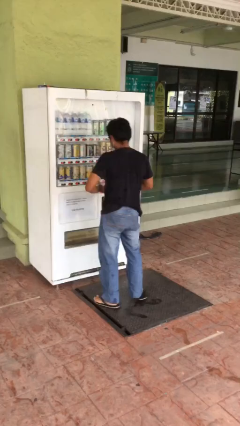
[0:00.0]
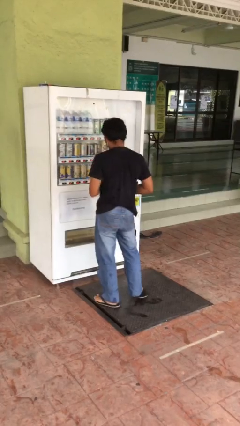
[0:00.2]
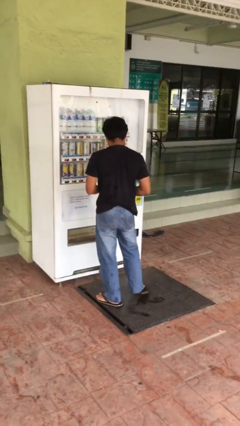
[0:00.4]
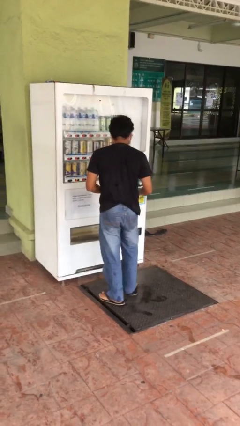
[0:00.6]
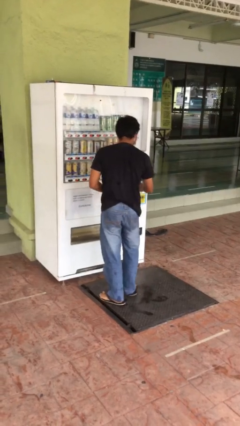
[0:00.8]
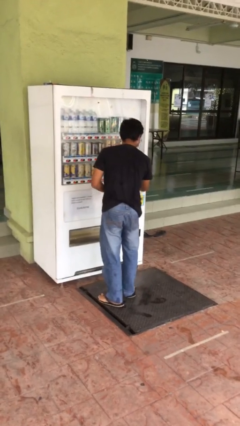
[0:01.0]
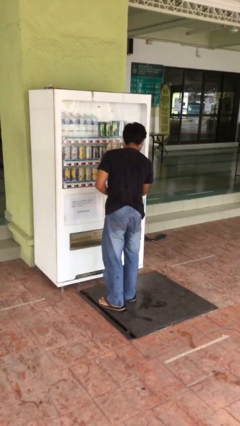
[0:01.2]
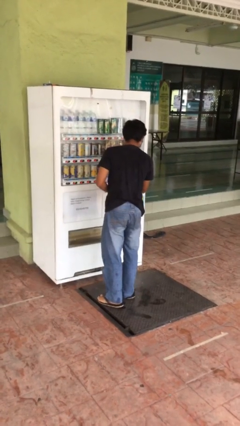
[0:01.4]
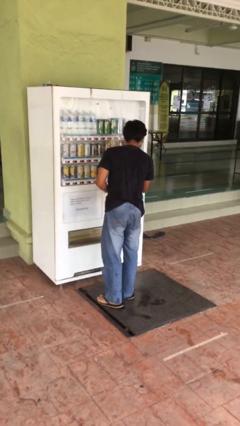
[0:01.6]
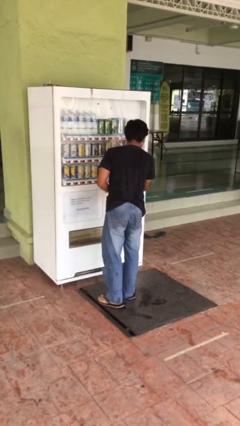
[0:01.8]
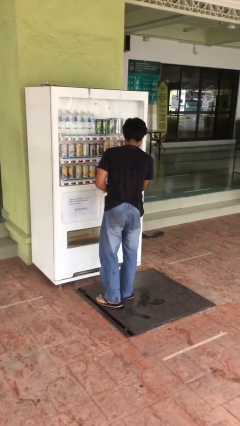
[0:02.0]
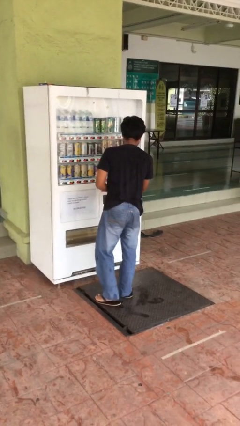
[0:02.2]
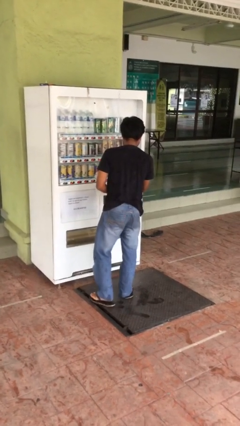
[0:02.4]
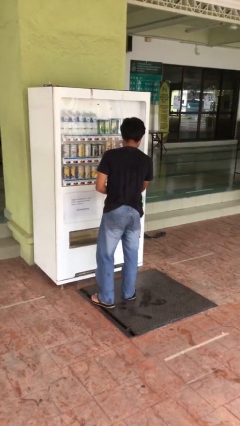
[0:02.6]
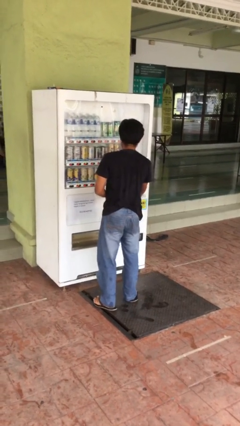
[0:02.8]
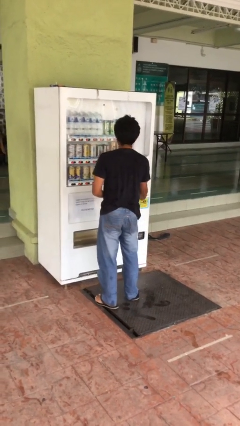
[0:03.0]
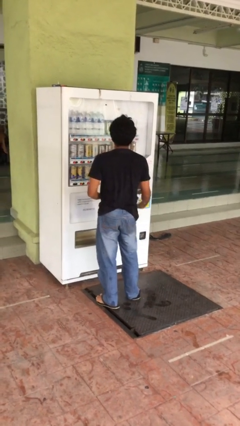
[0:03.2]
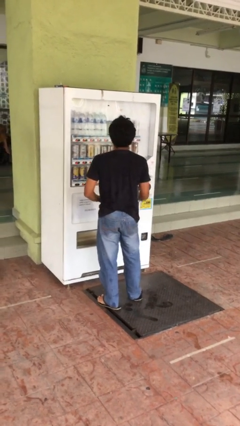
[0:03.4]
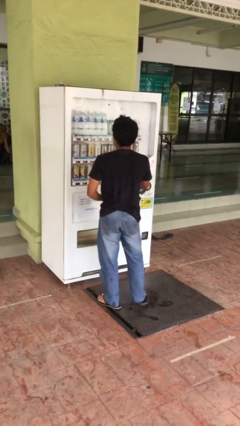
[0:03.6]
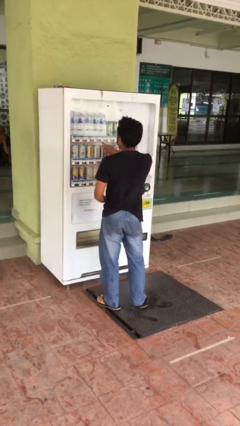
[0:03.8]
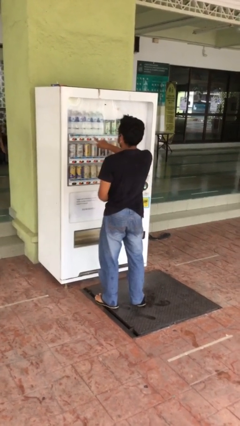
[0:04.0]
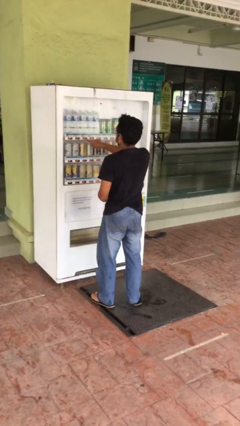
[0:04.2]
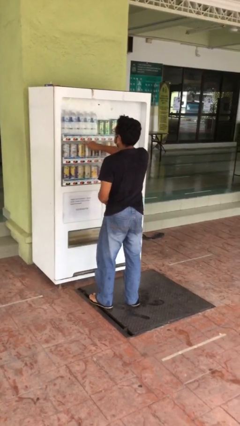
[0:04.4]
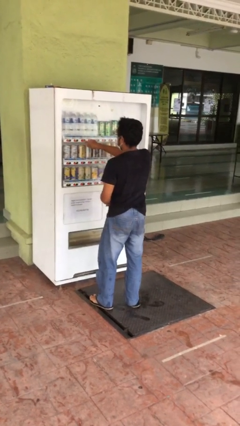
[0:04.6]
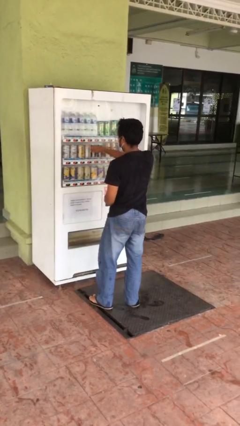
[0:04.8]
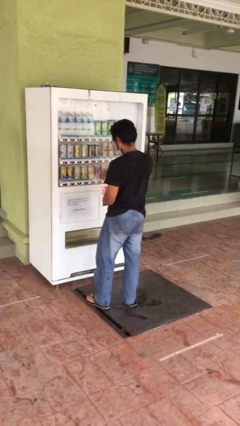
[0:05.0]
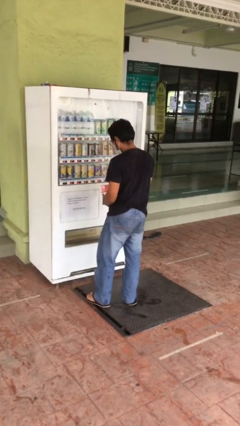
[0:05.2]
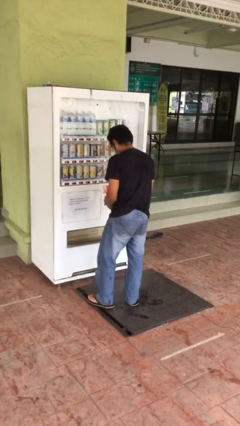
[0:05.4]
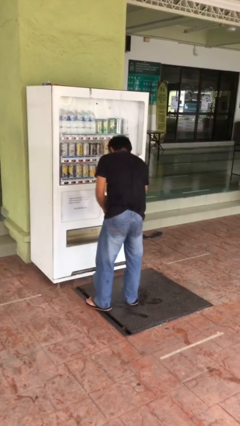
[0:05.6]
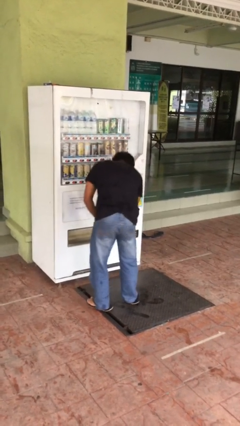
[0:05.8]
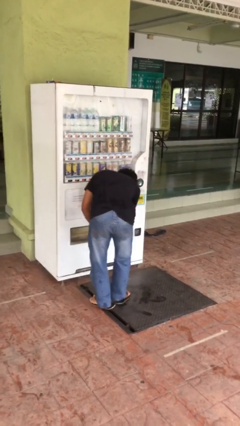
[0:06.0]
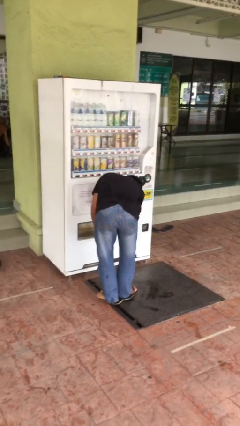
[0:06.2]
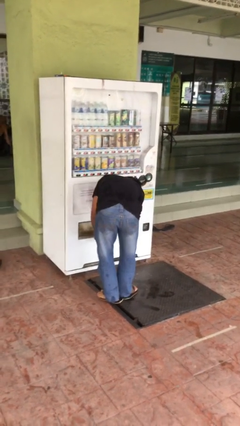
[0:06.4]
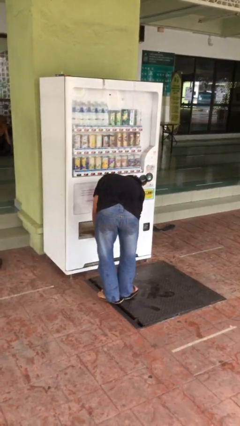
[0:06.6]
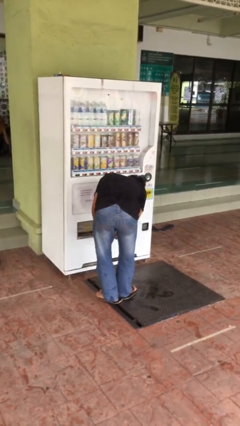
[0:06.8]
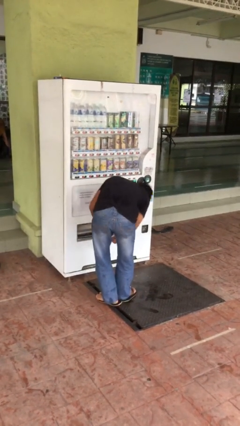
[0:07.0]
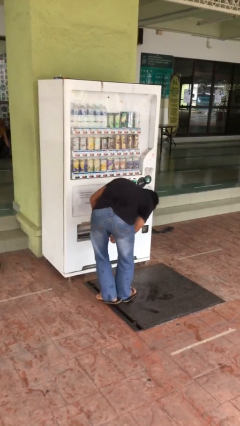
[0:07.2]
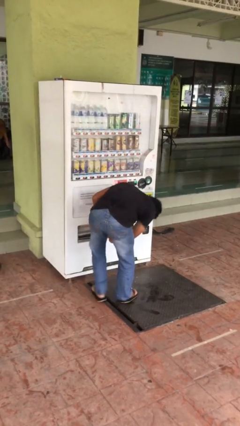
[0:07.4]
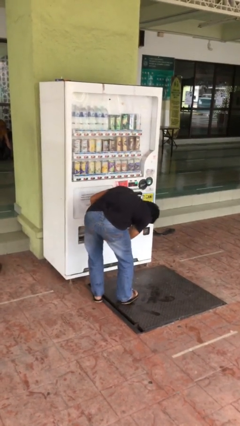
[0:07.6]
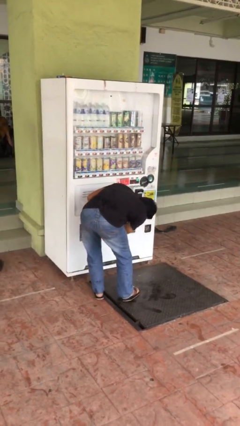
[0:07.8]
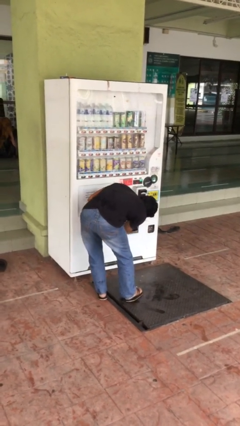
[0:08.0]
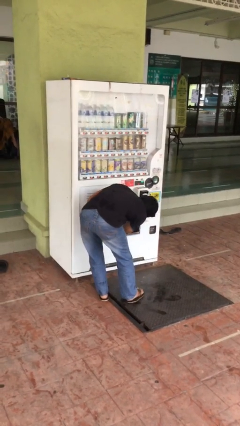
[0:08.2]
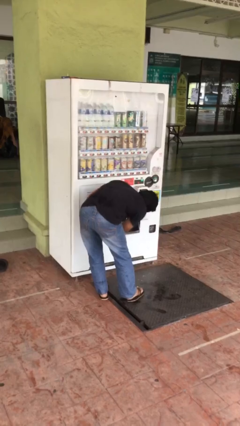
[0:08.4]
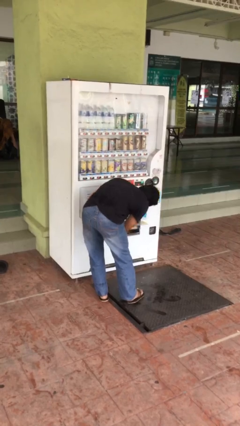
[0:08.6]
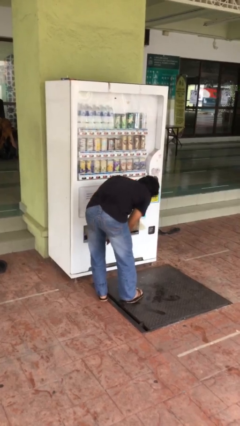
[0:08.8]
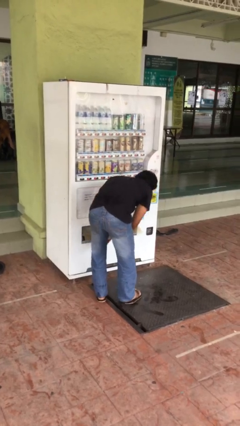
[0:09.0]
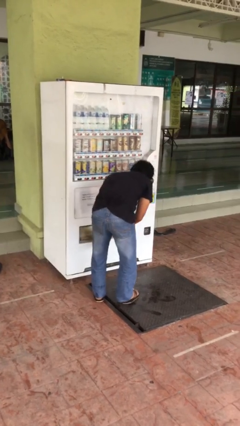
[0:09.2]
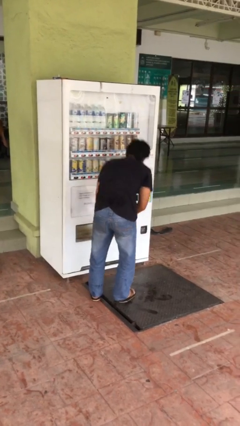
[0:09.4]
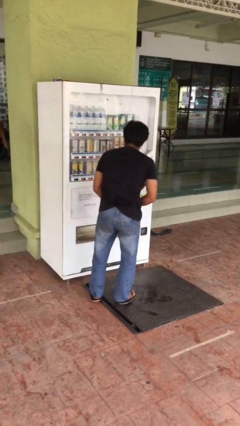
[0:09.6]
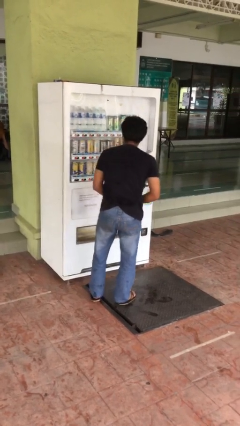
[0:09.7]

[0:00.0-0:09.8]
person purchases from machine

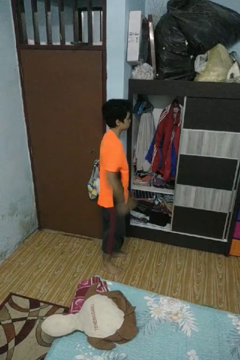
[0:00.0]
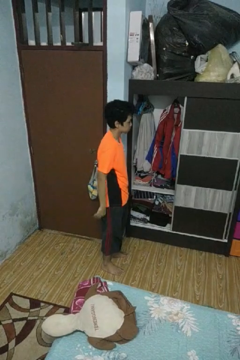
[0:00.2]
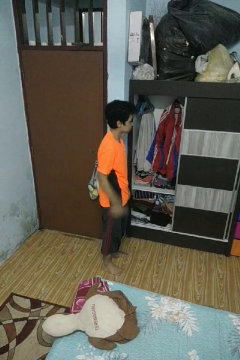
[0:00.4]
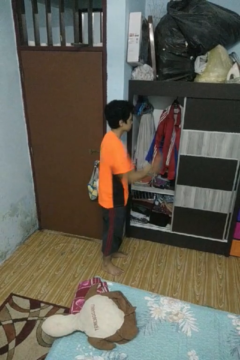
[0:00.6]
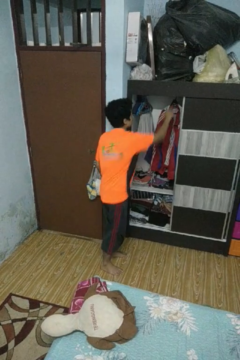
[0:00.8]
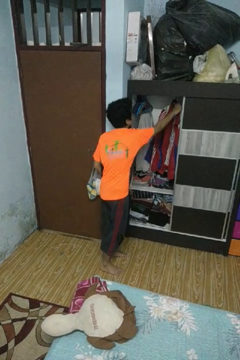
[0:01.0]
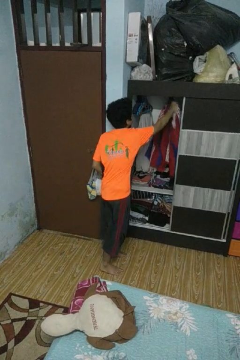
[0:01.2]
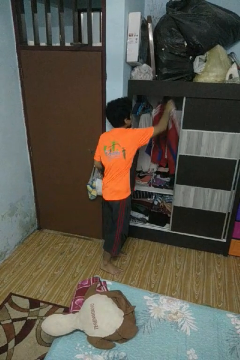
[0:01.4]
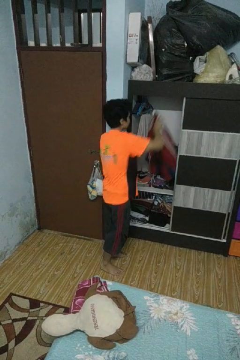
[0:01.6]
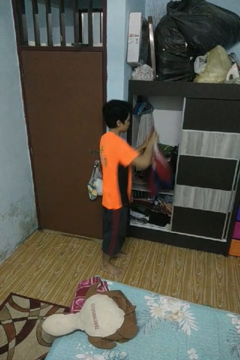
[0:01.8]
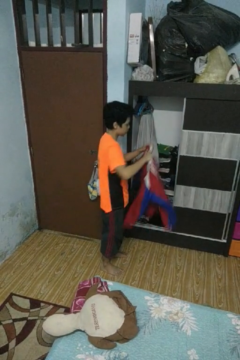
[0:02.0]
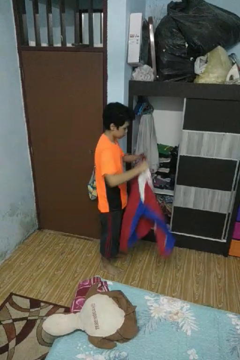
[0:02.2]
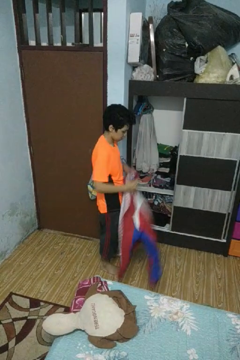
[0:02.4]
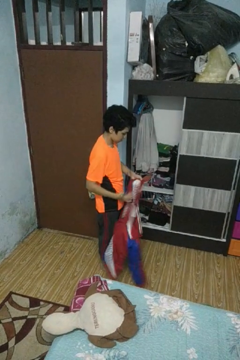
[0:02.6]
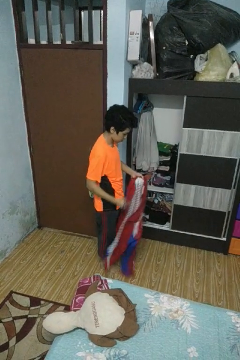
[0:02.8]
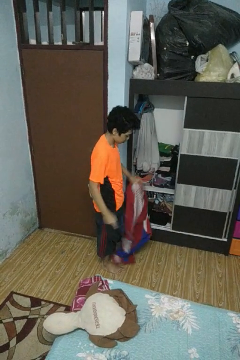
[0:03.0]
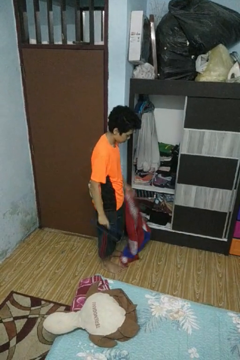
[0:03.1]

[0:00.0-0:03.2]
person takes clothes from closet

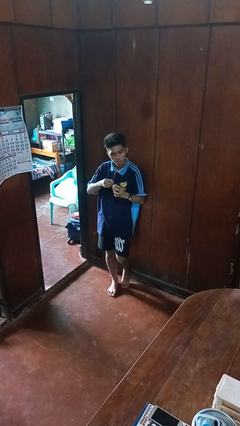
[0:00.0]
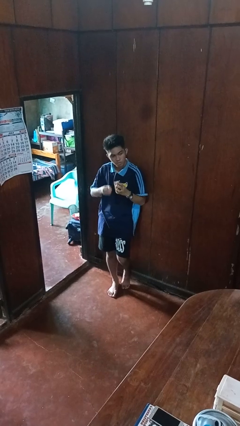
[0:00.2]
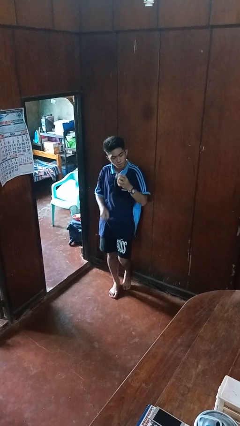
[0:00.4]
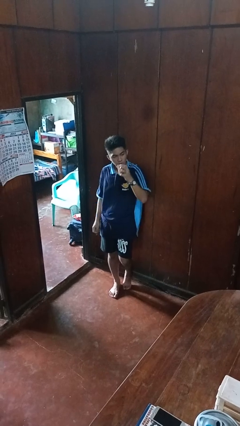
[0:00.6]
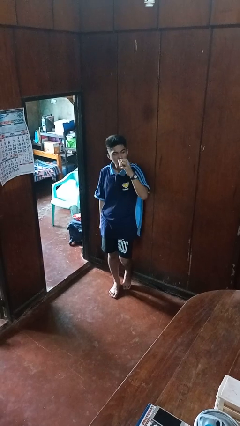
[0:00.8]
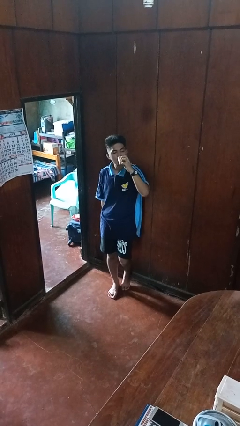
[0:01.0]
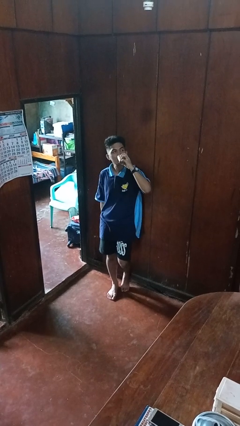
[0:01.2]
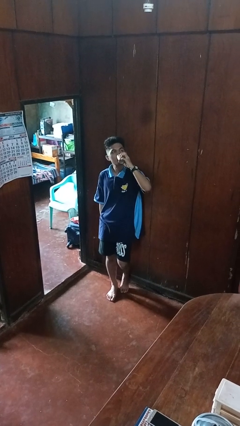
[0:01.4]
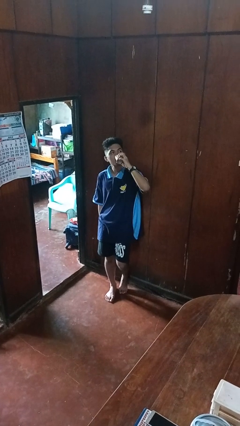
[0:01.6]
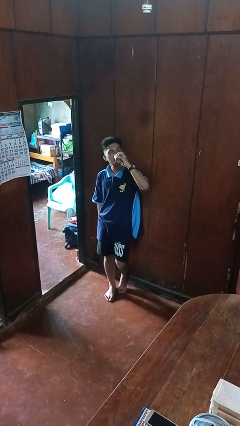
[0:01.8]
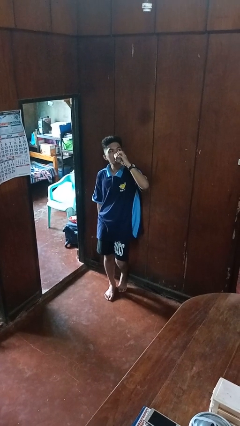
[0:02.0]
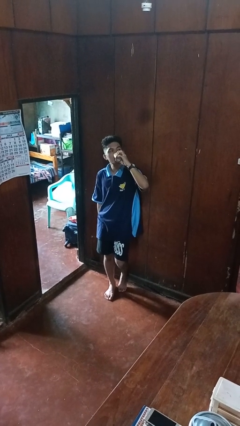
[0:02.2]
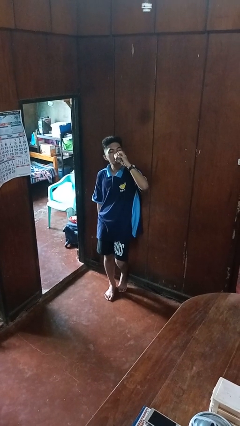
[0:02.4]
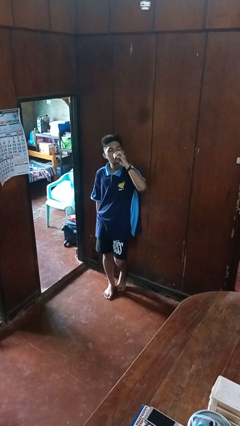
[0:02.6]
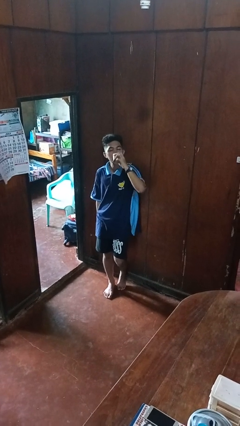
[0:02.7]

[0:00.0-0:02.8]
person drinks from beverage can

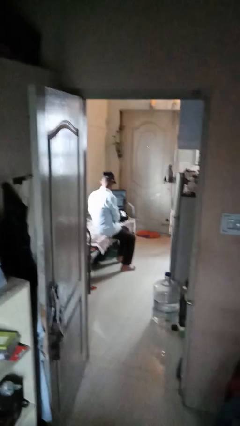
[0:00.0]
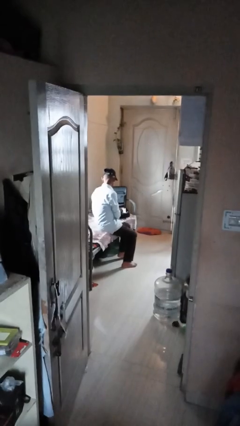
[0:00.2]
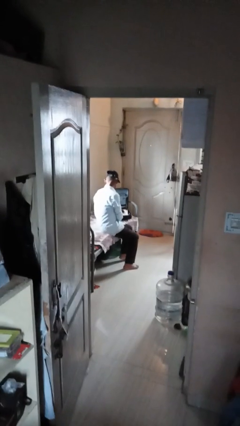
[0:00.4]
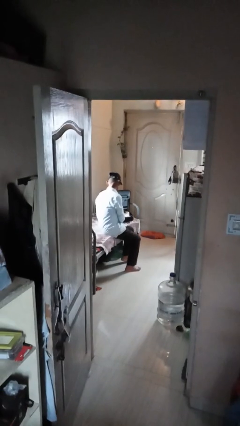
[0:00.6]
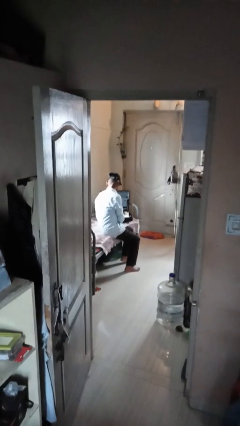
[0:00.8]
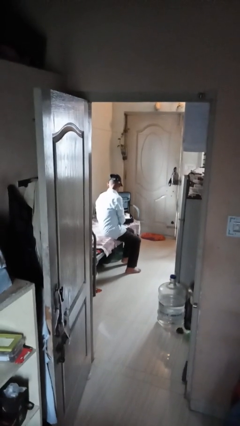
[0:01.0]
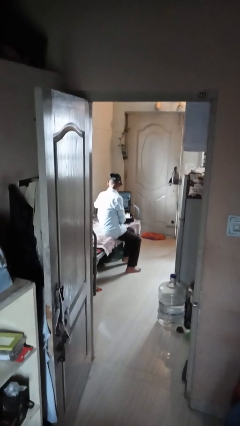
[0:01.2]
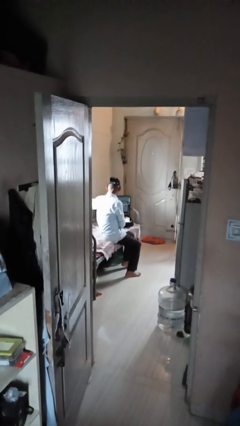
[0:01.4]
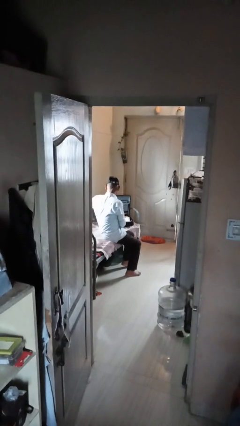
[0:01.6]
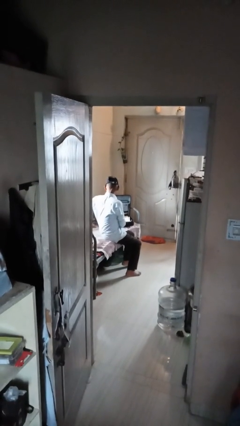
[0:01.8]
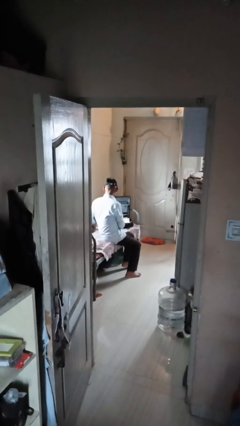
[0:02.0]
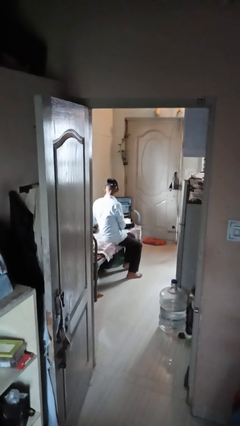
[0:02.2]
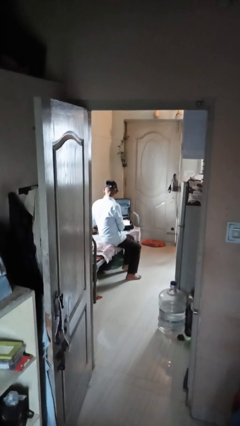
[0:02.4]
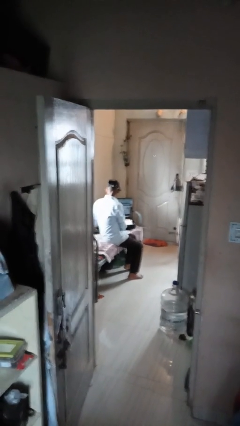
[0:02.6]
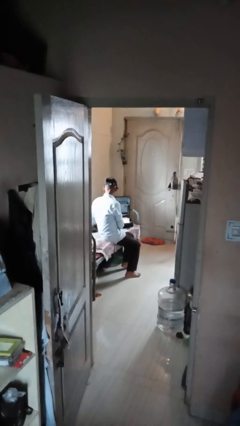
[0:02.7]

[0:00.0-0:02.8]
person unloads clothes from suitcase
